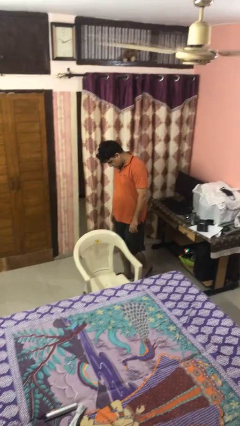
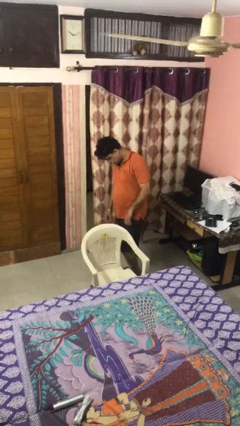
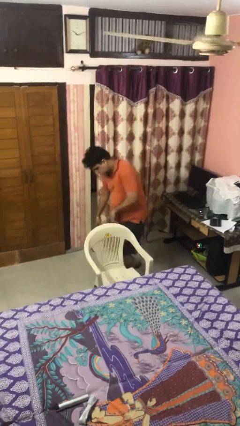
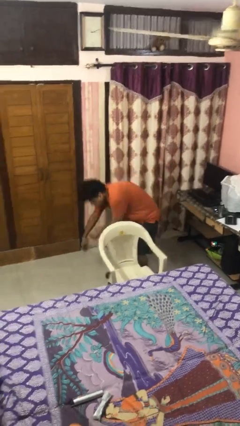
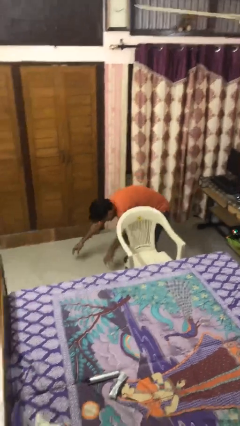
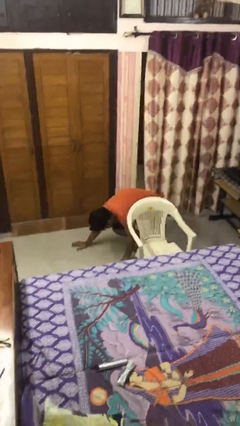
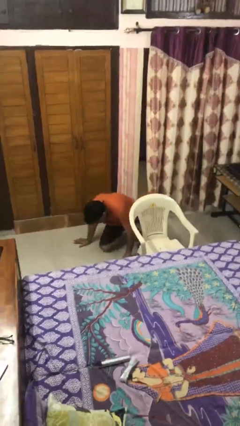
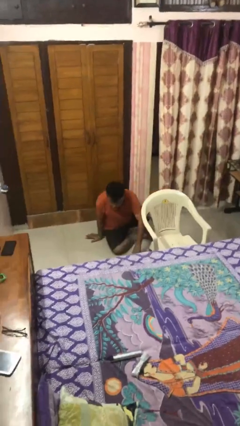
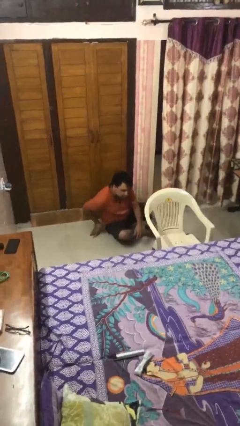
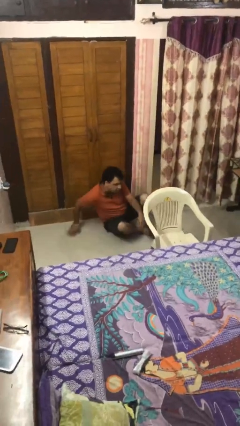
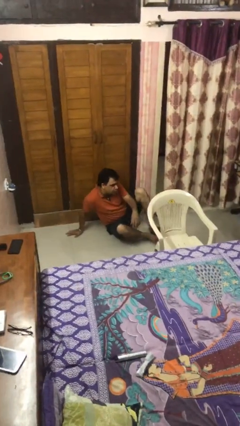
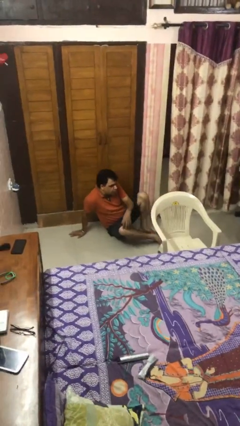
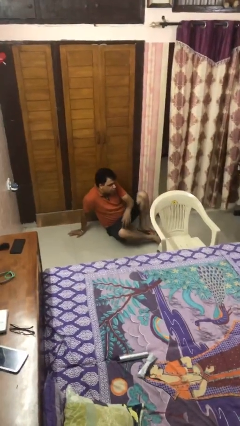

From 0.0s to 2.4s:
person trips on object on floor

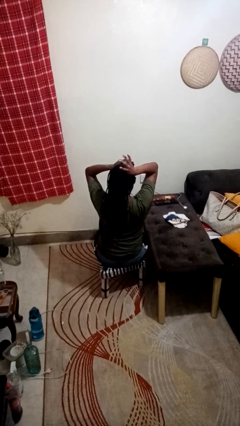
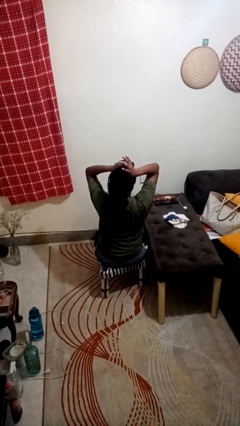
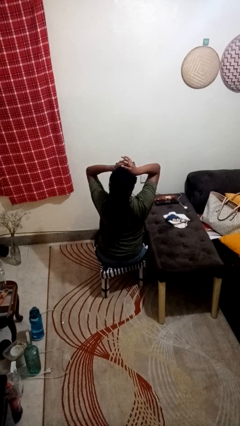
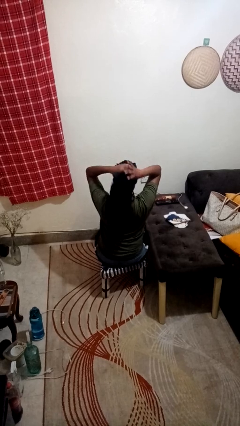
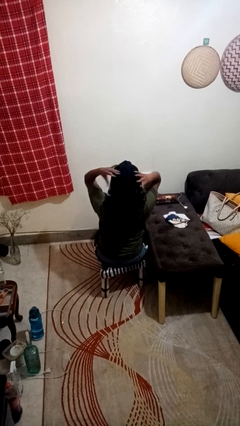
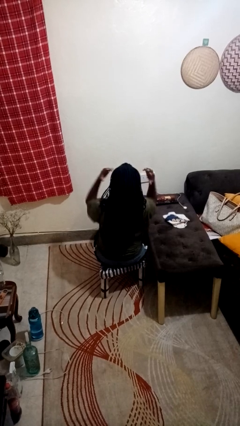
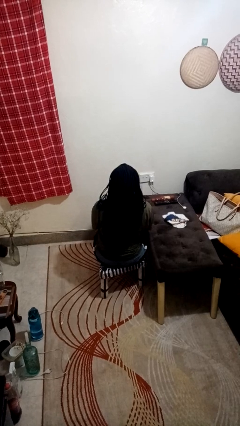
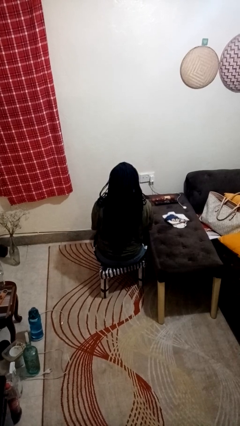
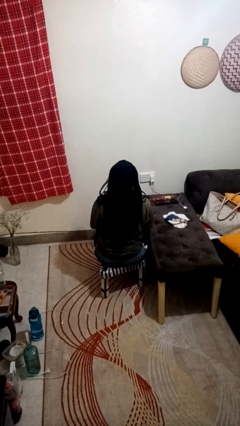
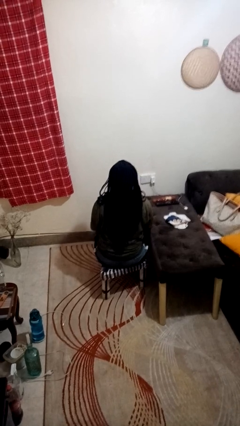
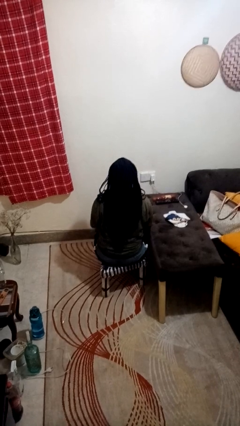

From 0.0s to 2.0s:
person takes off hairtie

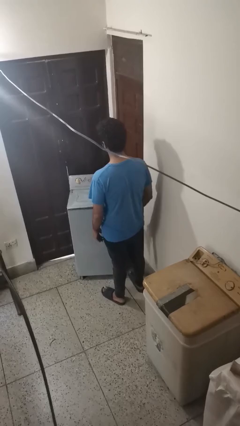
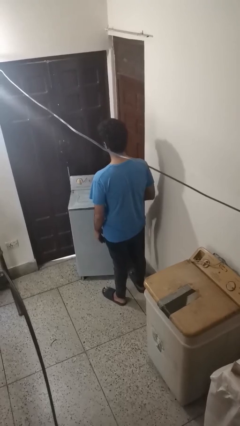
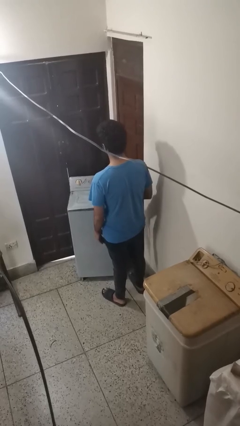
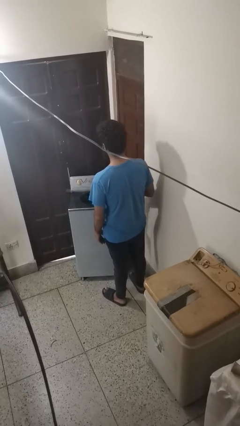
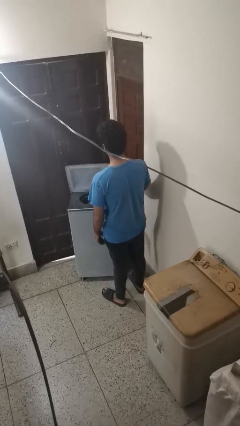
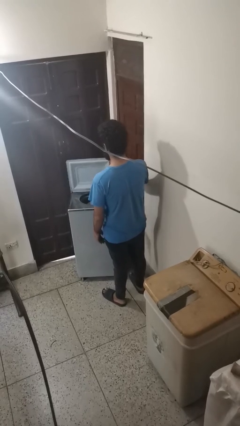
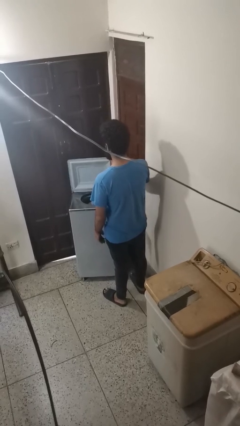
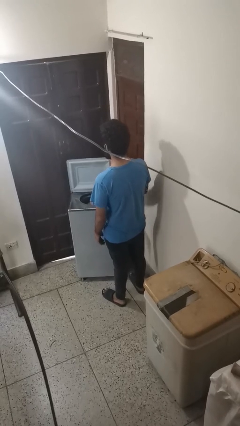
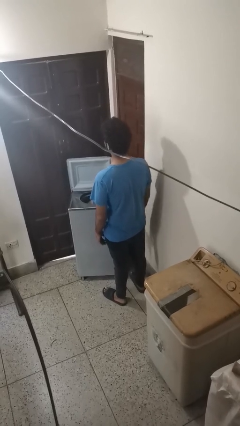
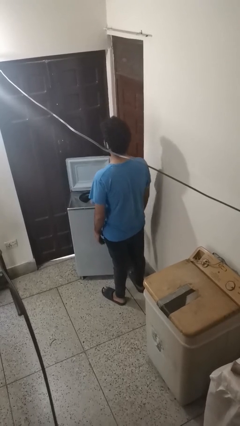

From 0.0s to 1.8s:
person opens clothes washer

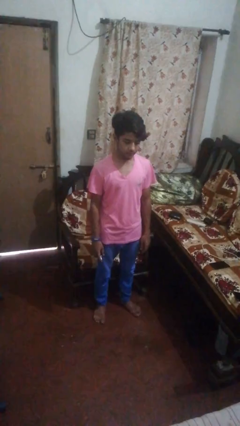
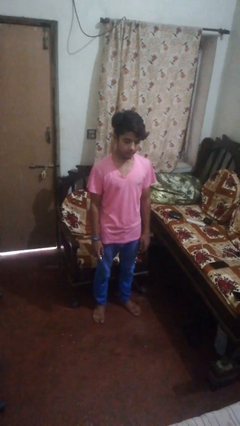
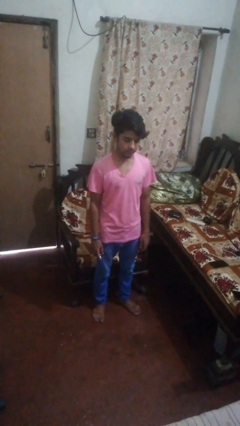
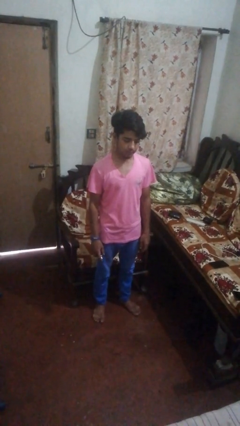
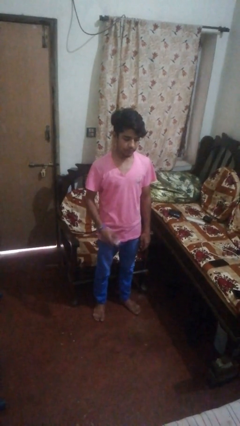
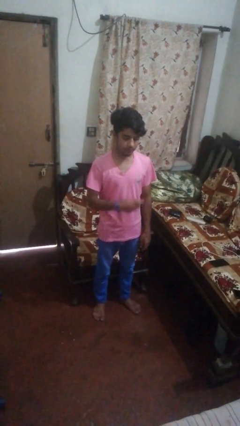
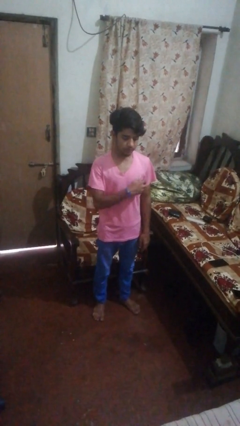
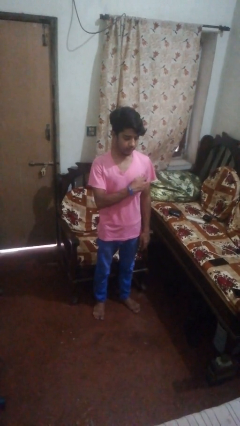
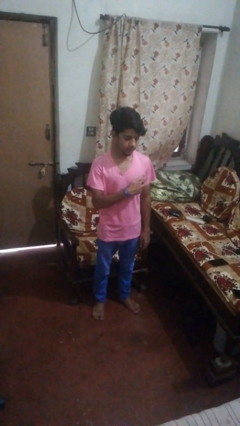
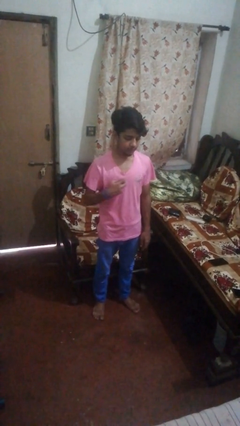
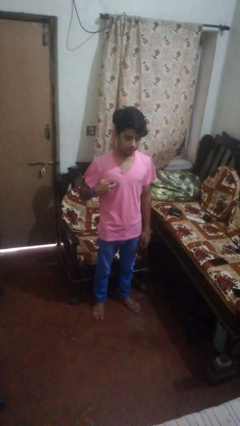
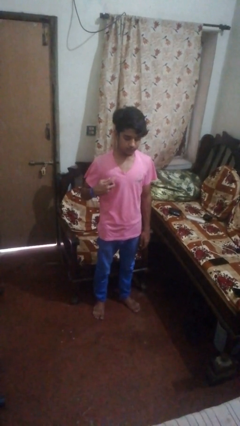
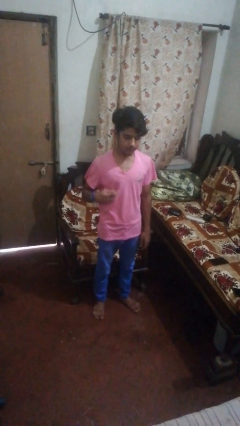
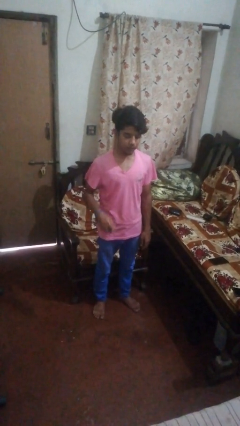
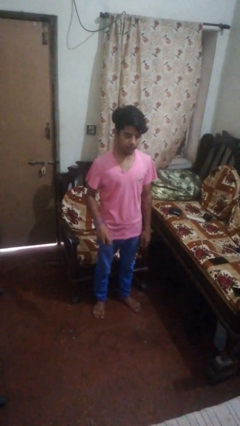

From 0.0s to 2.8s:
person applies deodorant

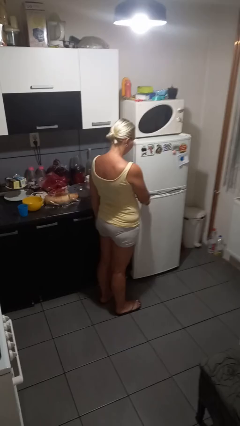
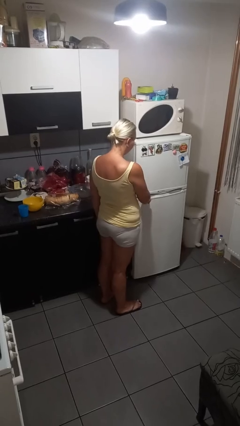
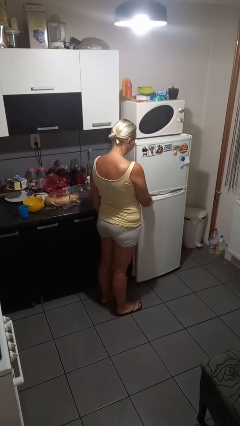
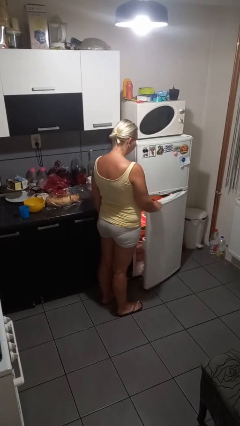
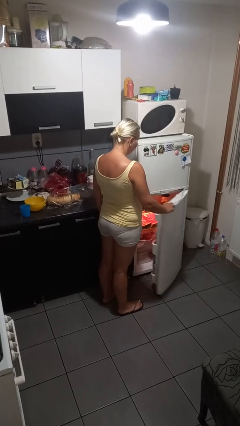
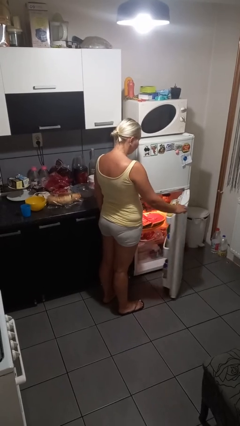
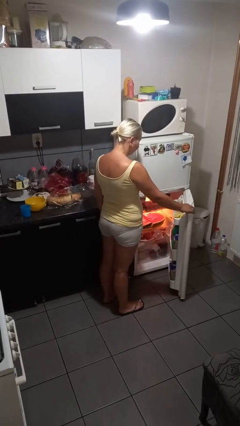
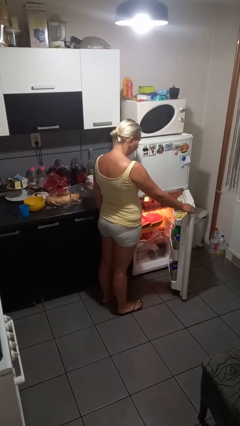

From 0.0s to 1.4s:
person opens refrigerator

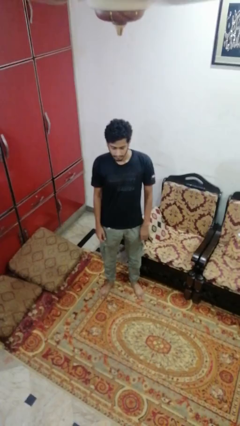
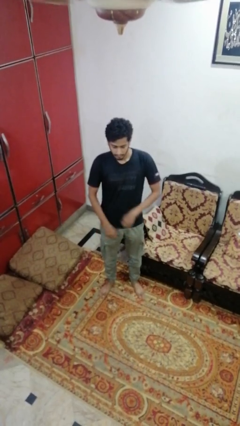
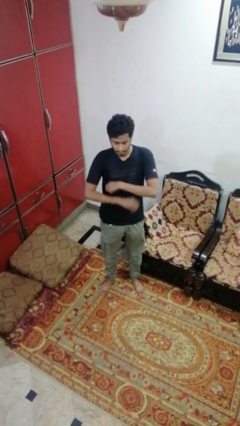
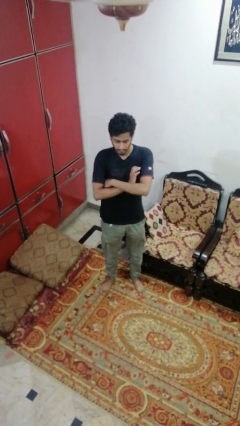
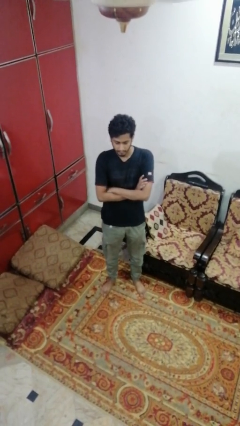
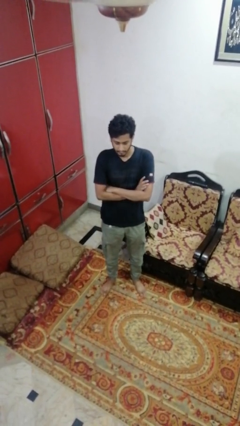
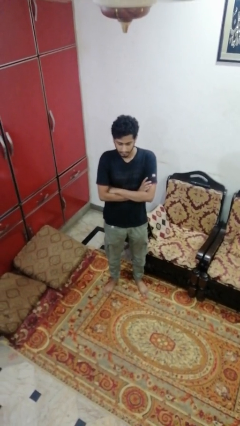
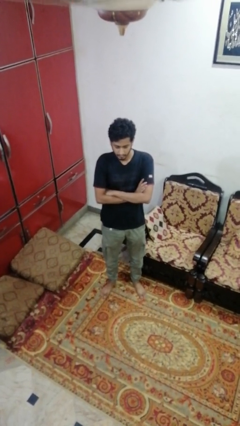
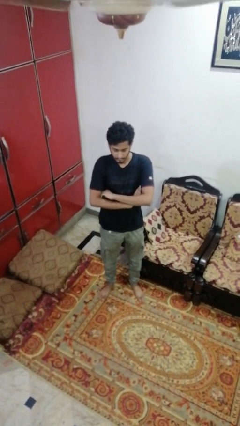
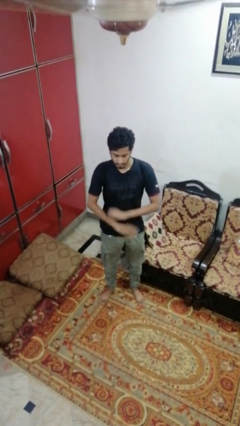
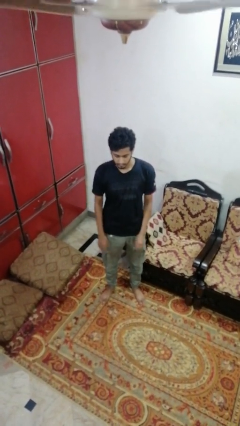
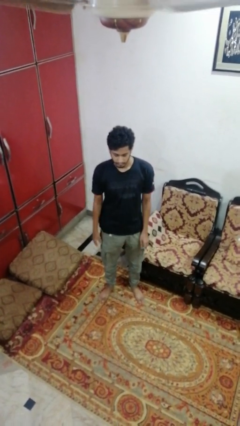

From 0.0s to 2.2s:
person crosses arms

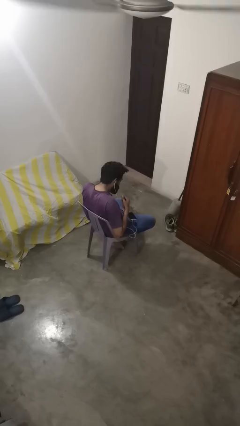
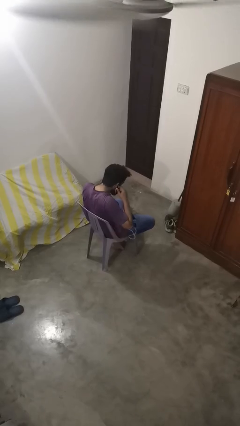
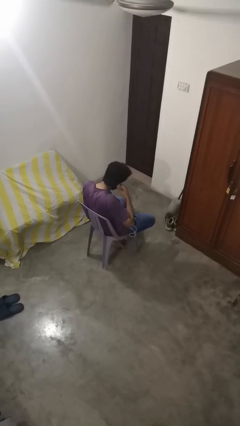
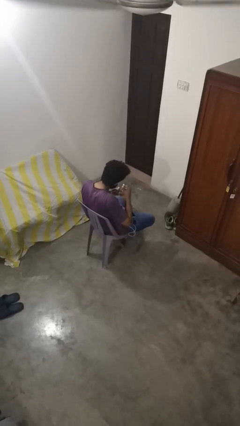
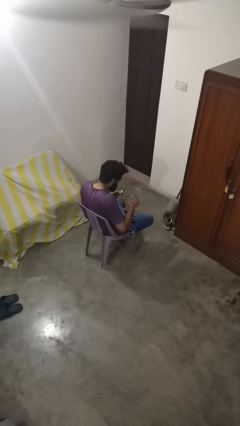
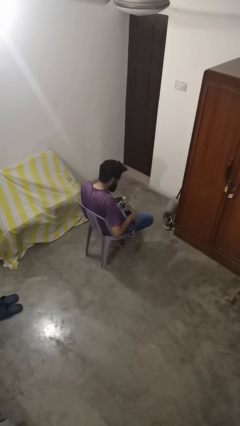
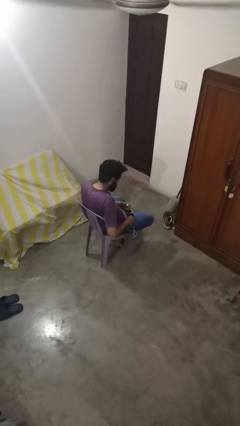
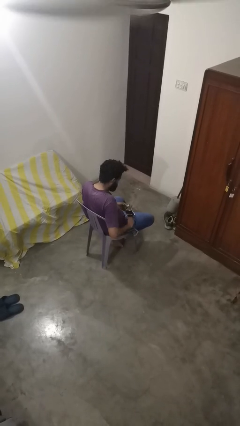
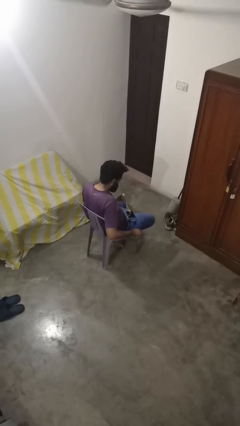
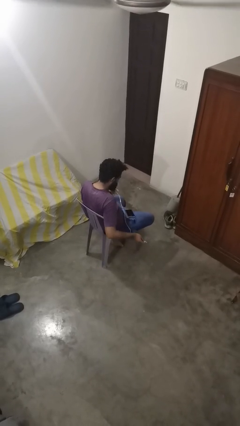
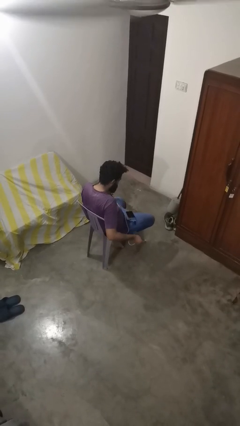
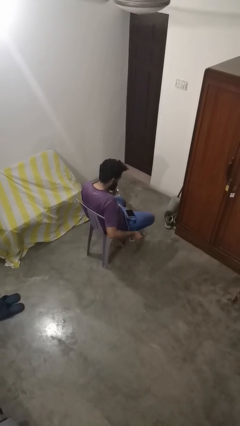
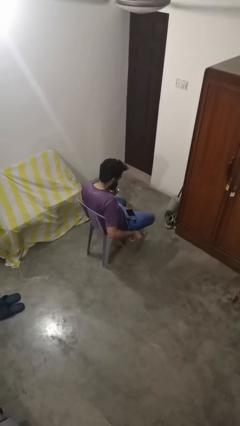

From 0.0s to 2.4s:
person takes off headphones

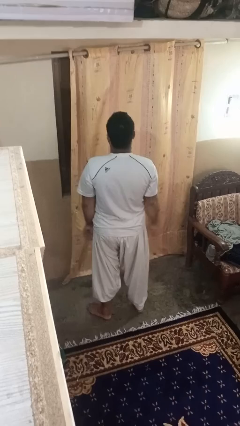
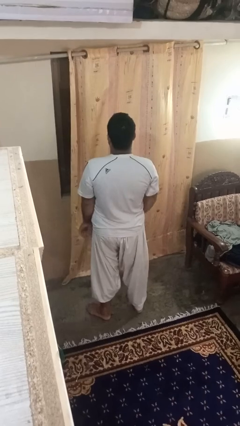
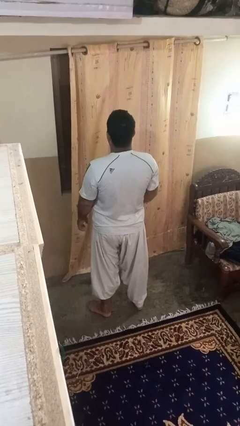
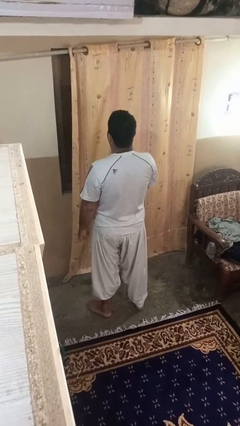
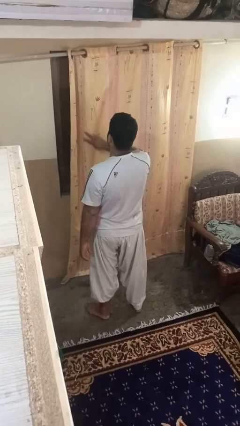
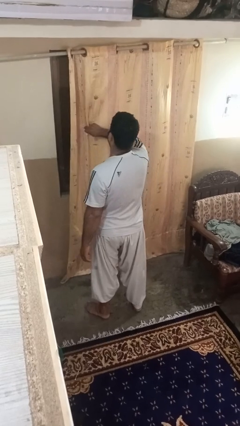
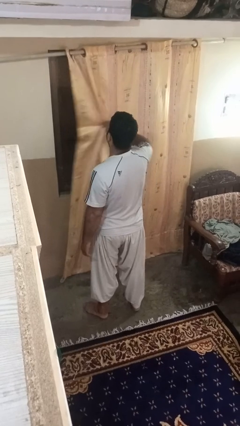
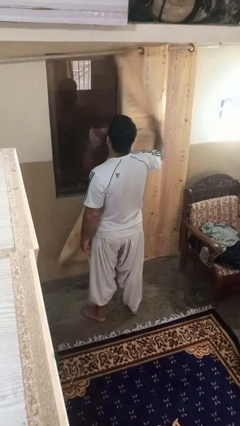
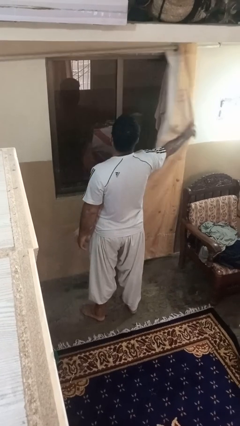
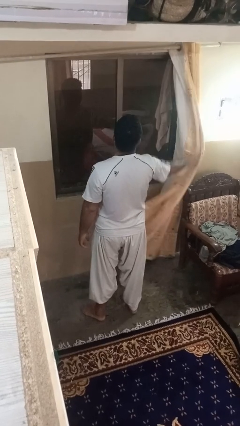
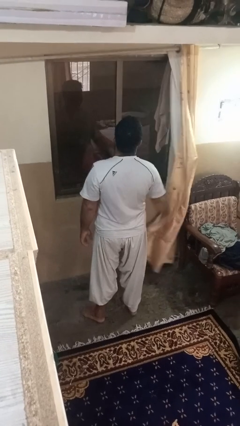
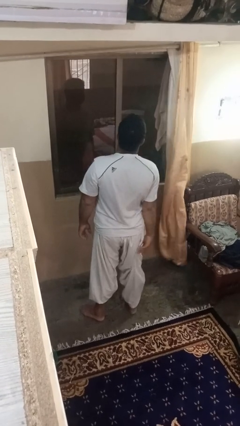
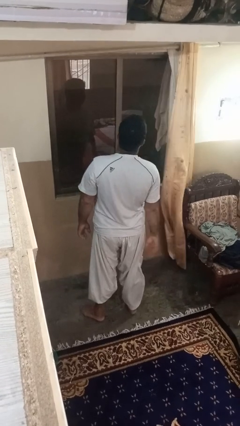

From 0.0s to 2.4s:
person opens curtains
